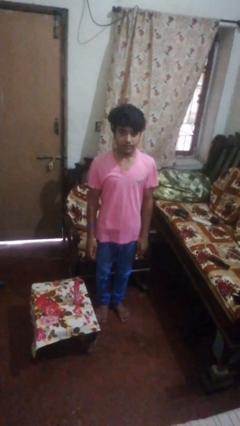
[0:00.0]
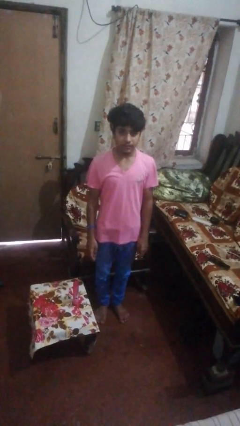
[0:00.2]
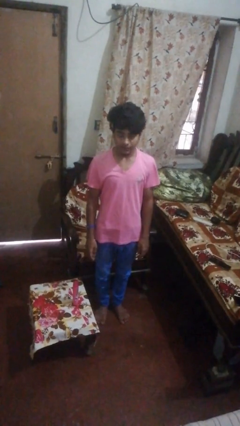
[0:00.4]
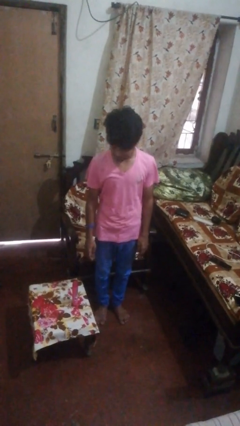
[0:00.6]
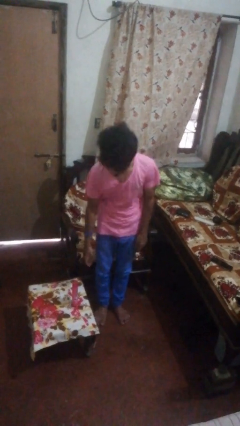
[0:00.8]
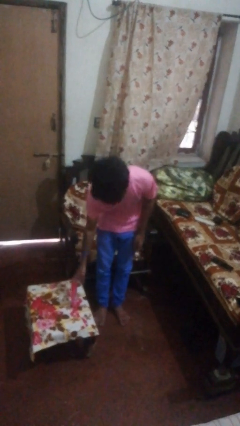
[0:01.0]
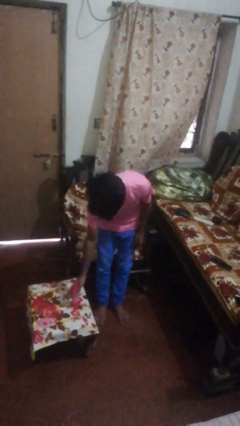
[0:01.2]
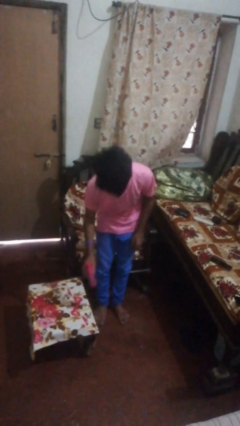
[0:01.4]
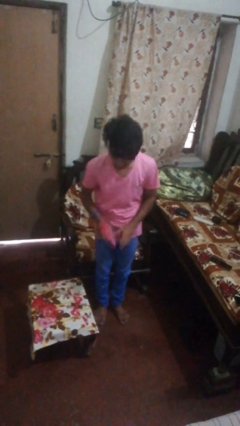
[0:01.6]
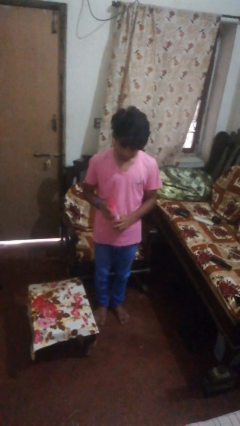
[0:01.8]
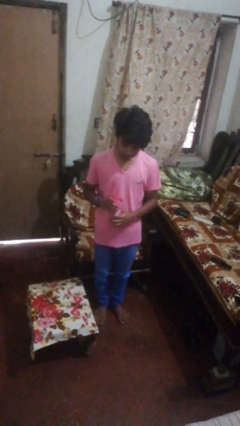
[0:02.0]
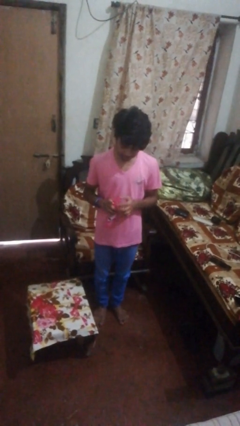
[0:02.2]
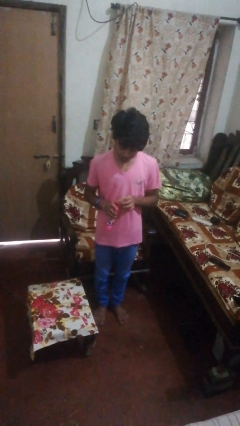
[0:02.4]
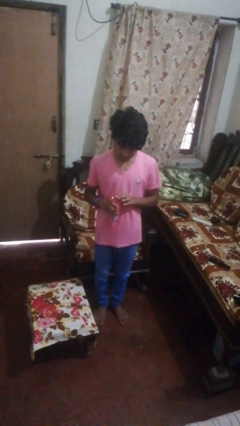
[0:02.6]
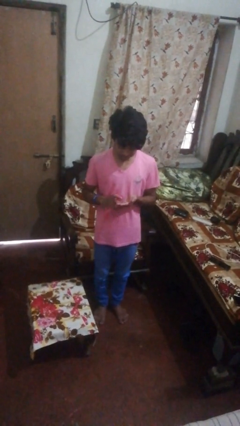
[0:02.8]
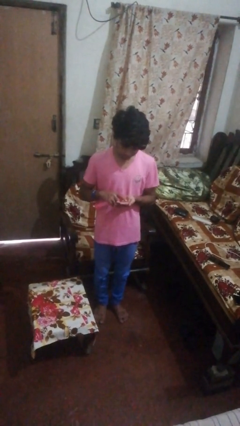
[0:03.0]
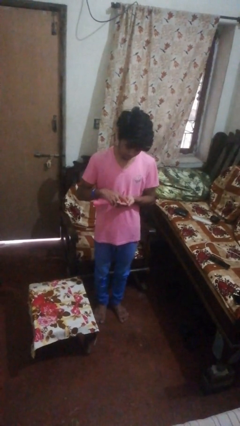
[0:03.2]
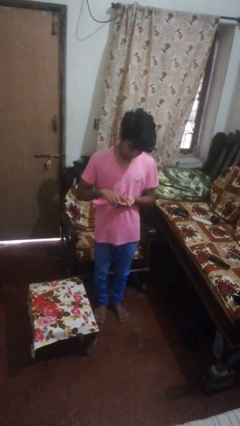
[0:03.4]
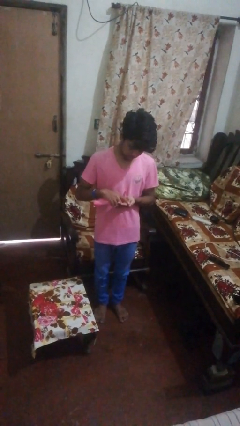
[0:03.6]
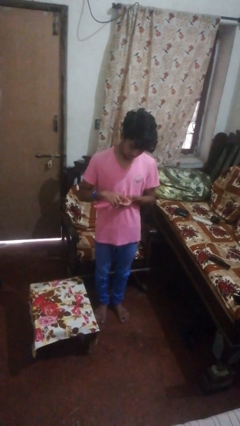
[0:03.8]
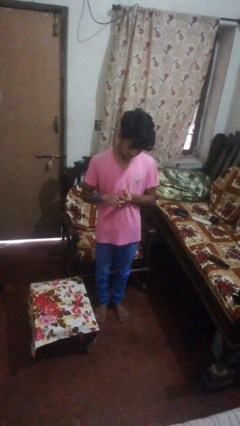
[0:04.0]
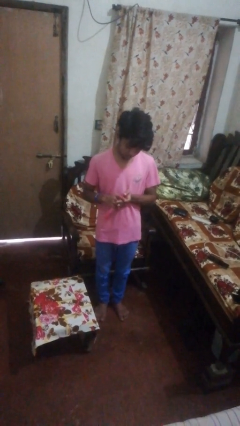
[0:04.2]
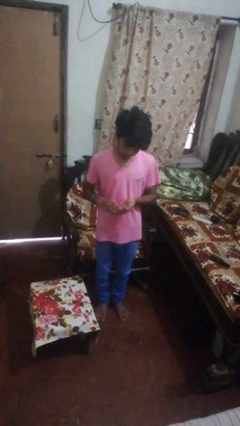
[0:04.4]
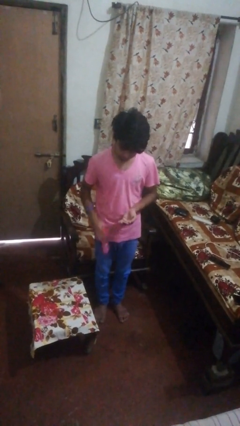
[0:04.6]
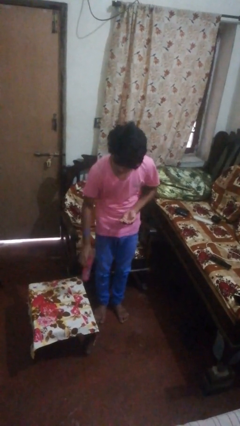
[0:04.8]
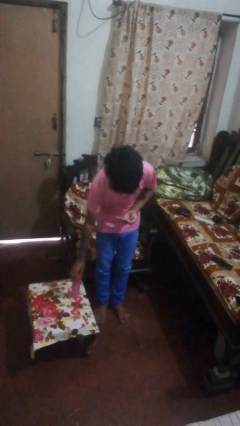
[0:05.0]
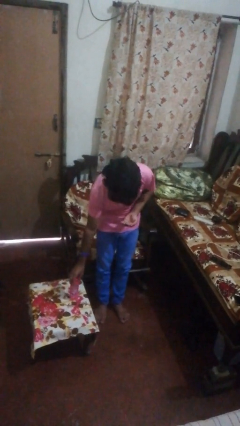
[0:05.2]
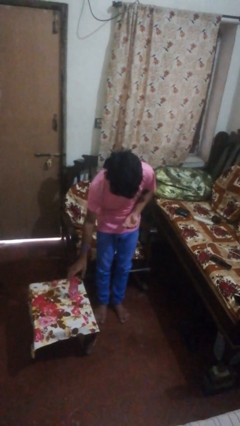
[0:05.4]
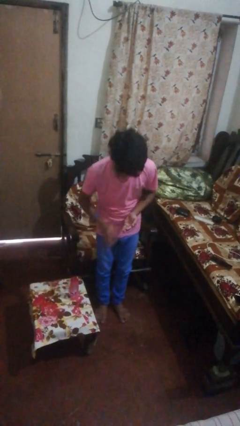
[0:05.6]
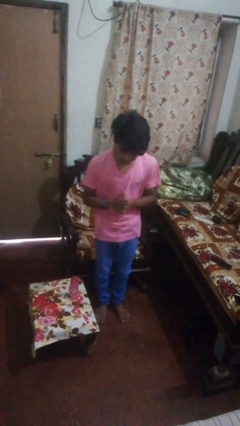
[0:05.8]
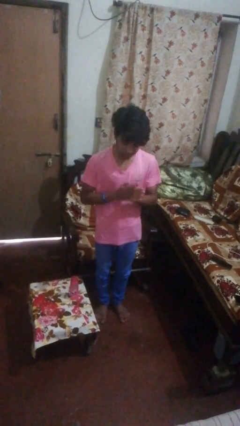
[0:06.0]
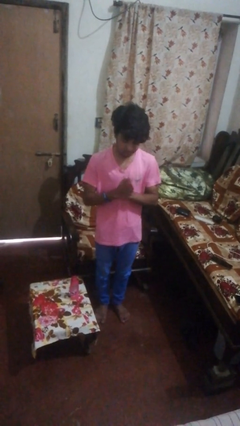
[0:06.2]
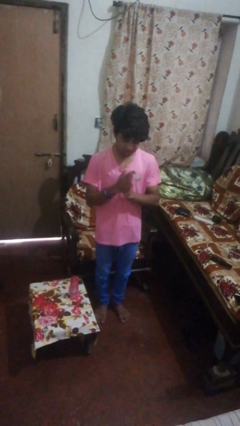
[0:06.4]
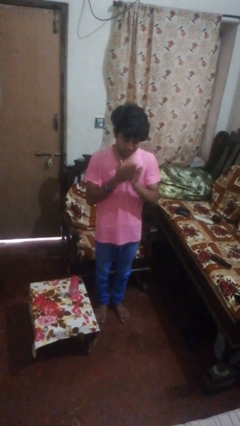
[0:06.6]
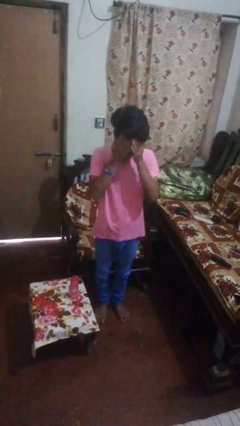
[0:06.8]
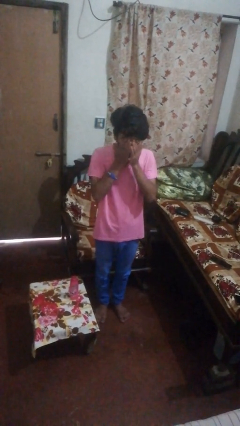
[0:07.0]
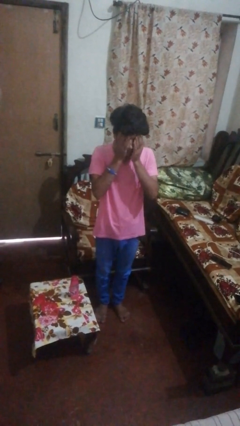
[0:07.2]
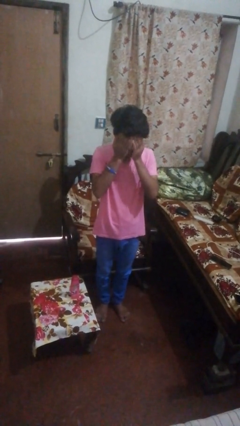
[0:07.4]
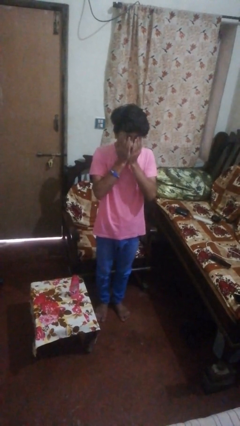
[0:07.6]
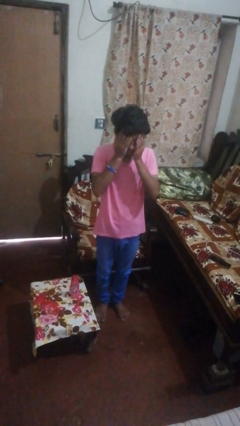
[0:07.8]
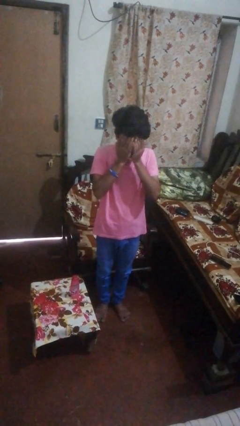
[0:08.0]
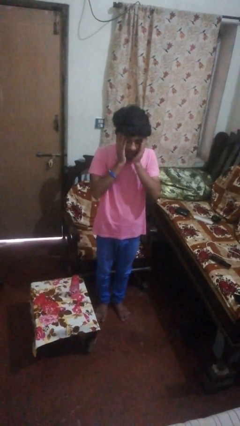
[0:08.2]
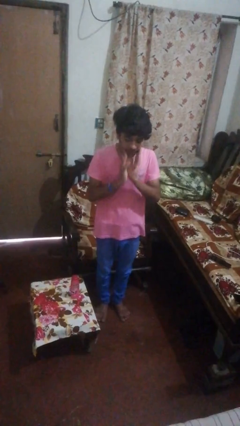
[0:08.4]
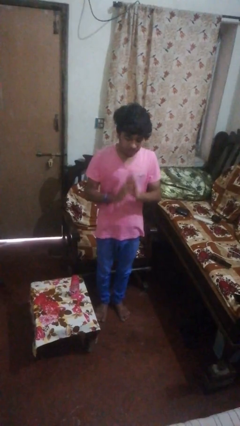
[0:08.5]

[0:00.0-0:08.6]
person applies sunscreen

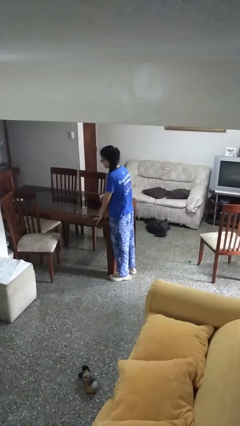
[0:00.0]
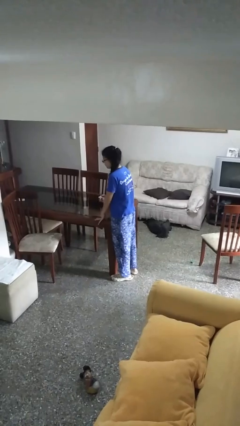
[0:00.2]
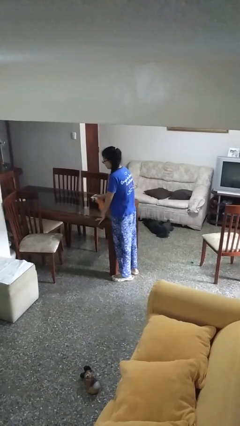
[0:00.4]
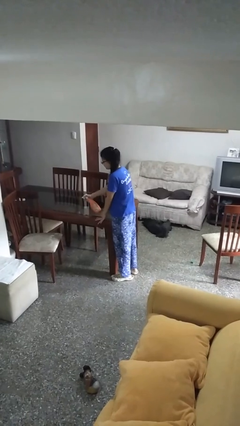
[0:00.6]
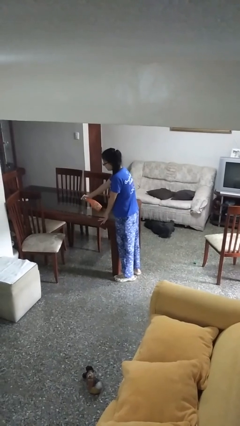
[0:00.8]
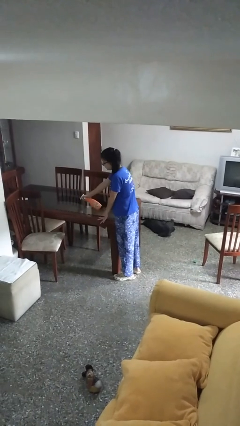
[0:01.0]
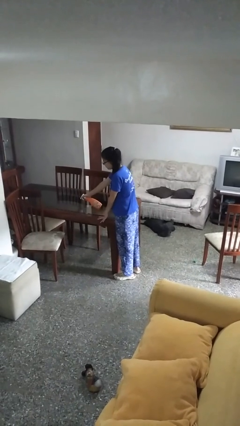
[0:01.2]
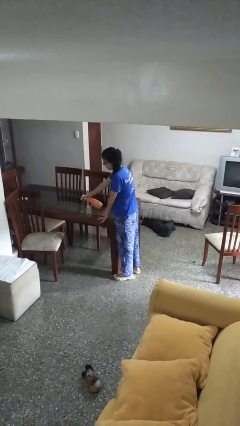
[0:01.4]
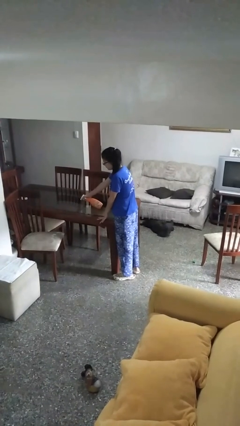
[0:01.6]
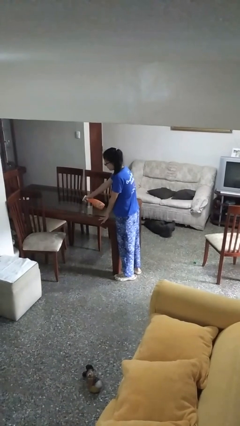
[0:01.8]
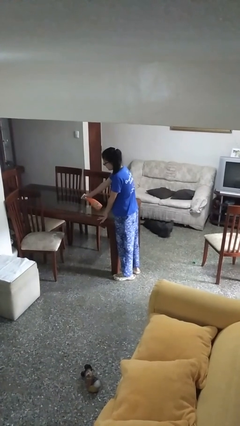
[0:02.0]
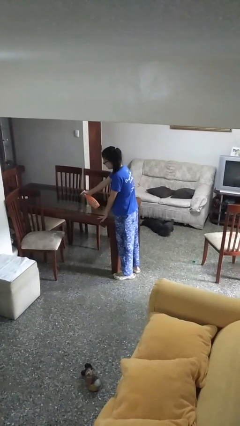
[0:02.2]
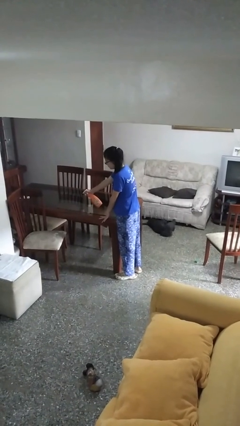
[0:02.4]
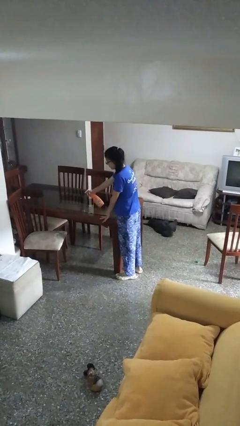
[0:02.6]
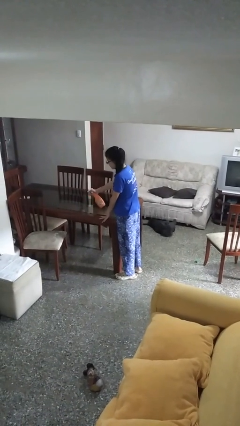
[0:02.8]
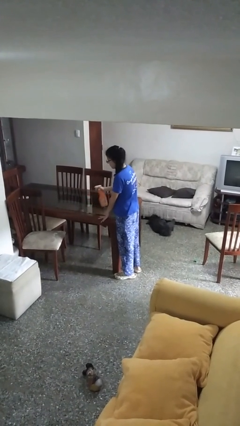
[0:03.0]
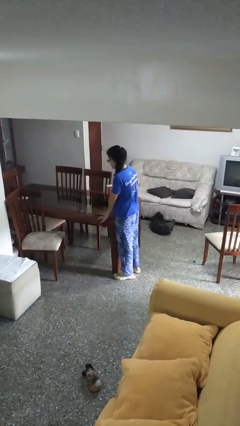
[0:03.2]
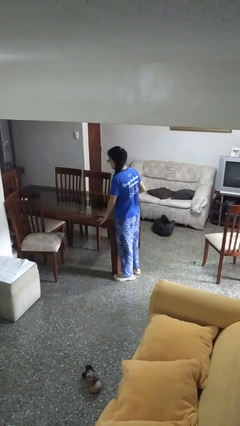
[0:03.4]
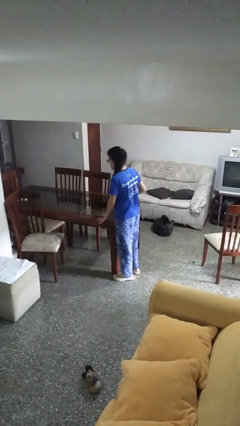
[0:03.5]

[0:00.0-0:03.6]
person sprays from bottle

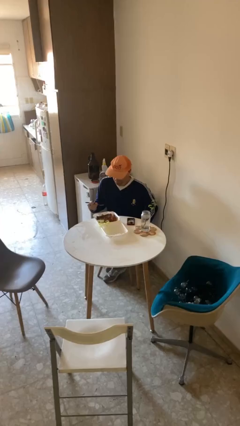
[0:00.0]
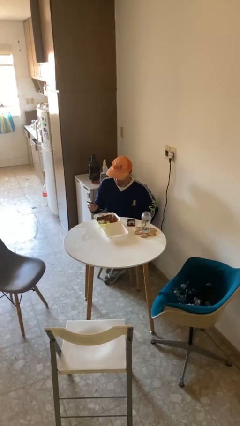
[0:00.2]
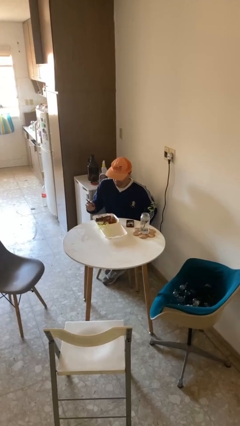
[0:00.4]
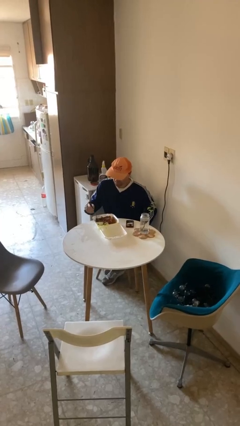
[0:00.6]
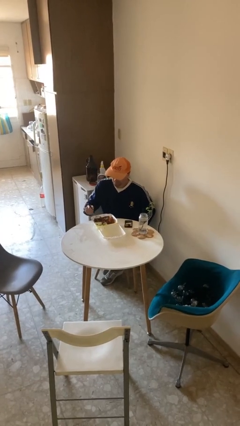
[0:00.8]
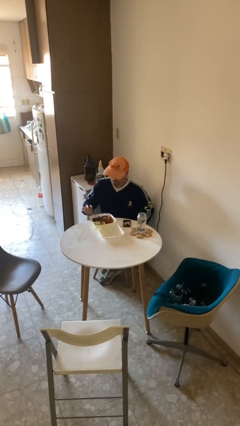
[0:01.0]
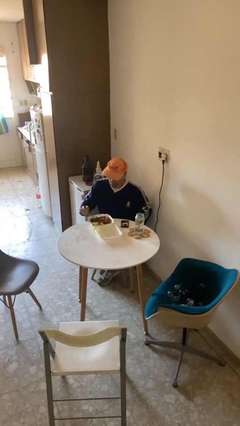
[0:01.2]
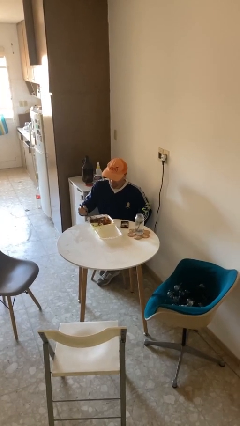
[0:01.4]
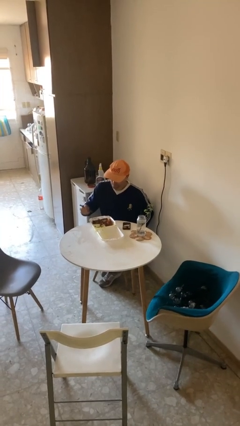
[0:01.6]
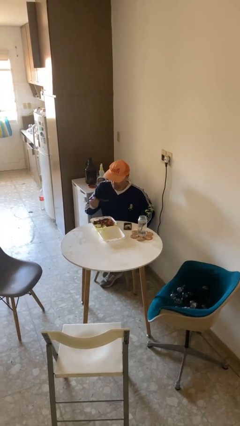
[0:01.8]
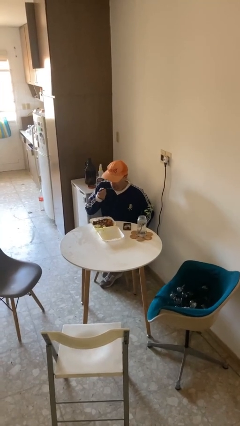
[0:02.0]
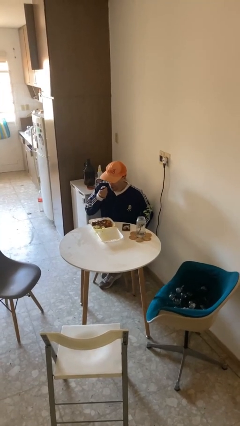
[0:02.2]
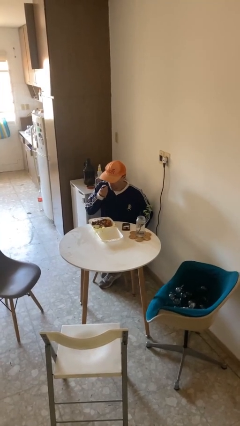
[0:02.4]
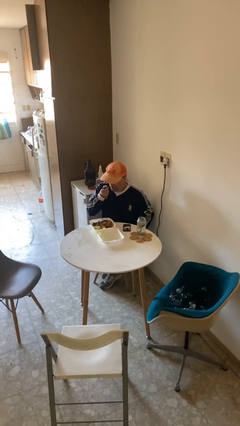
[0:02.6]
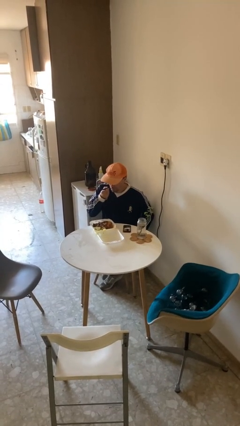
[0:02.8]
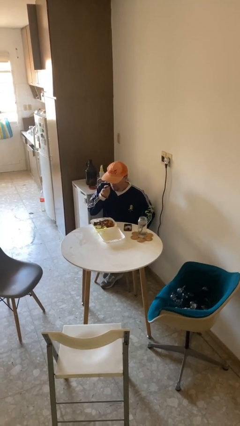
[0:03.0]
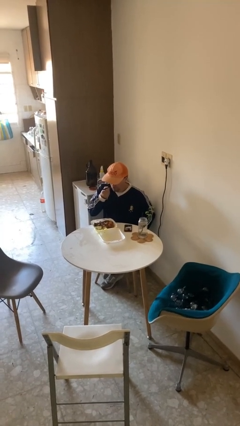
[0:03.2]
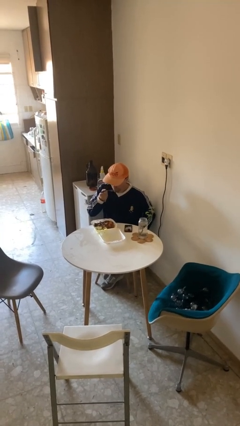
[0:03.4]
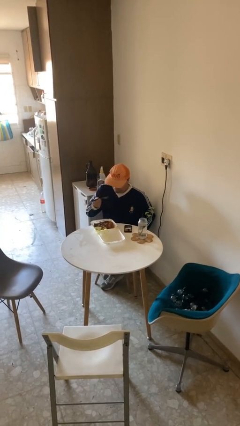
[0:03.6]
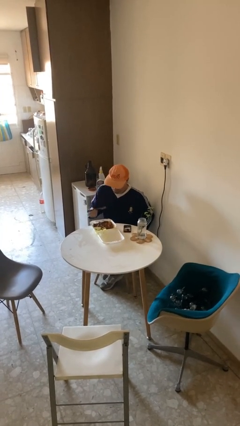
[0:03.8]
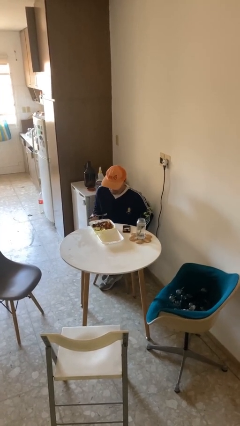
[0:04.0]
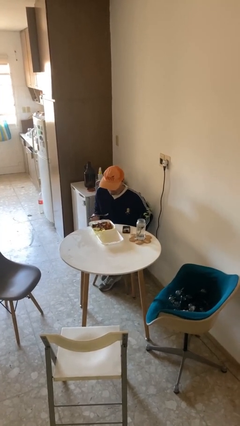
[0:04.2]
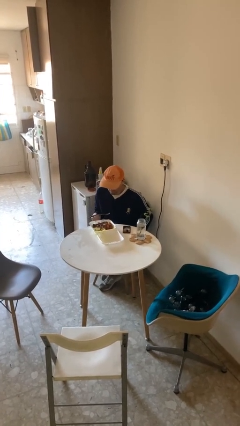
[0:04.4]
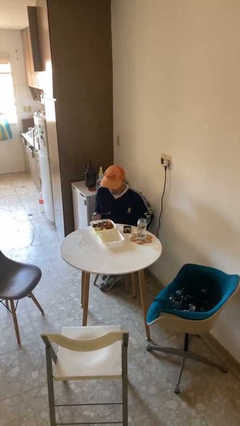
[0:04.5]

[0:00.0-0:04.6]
person eats with utensil

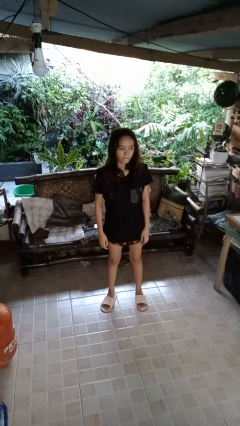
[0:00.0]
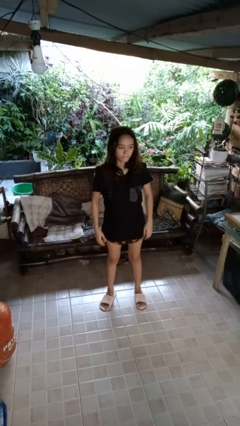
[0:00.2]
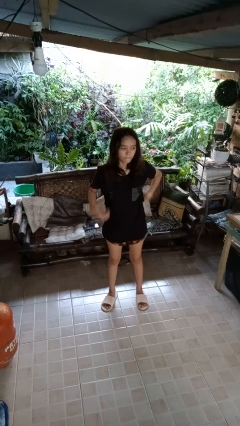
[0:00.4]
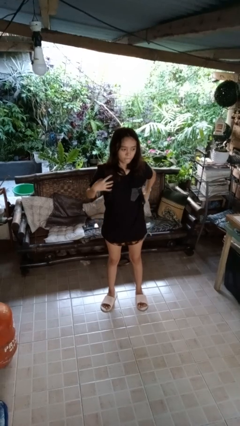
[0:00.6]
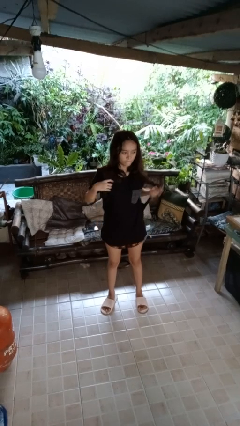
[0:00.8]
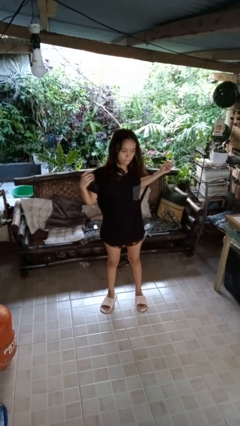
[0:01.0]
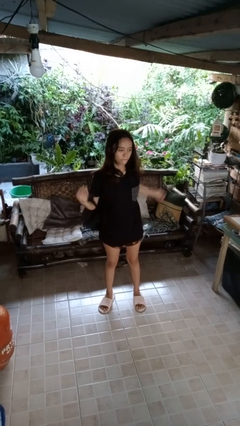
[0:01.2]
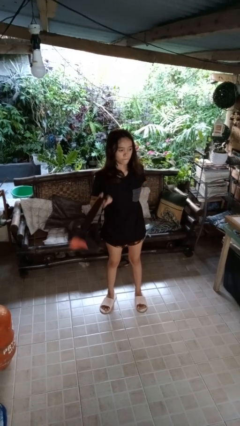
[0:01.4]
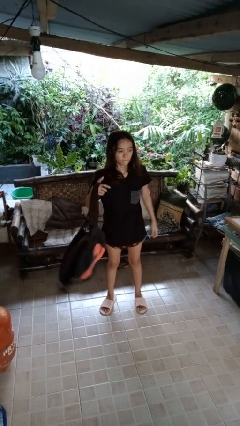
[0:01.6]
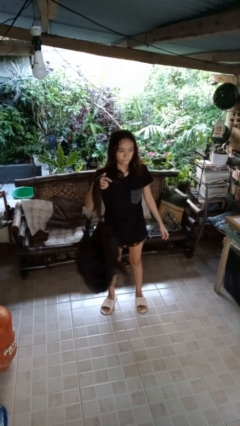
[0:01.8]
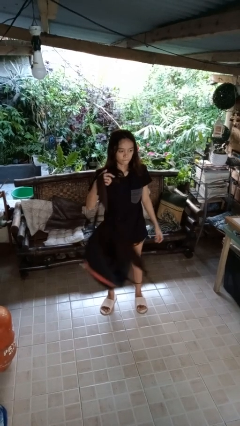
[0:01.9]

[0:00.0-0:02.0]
person takes off backpack
